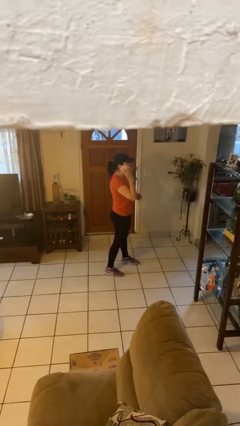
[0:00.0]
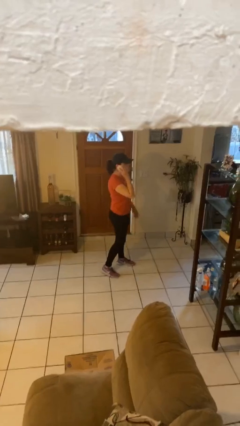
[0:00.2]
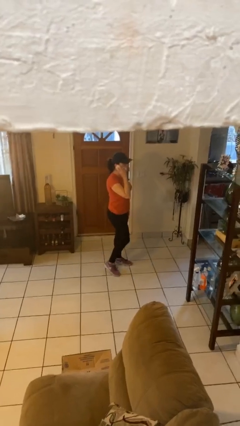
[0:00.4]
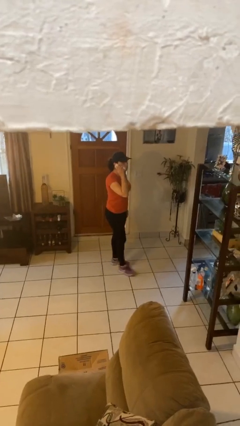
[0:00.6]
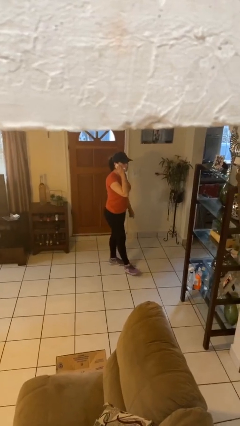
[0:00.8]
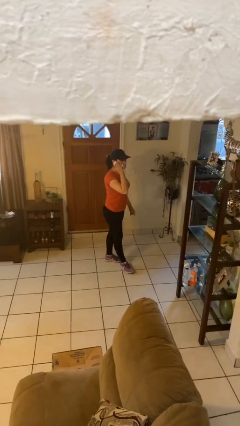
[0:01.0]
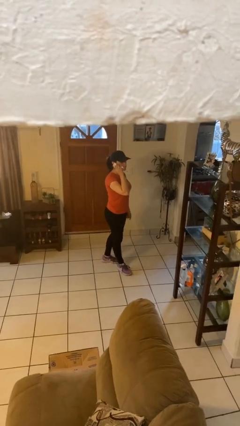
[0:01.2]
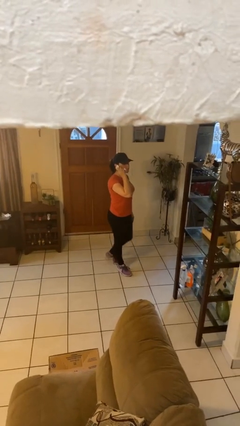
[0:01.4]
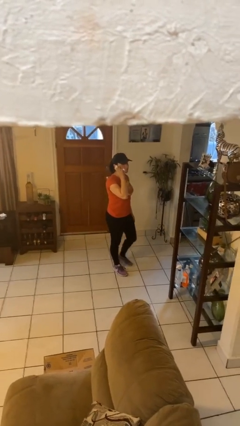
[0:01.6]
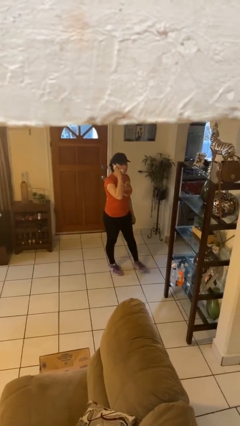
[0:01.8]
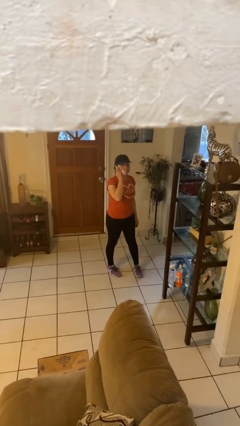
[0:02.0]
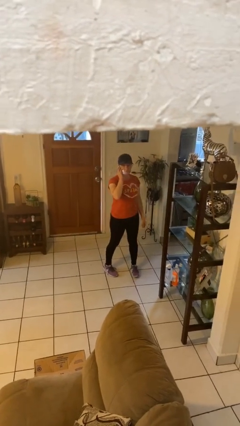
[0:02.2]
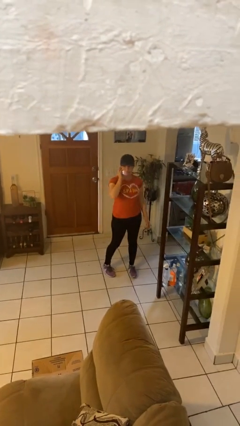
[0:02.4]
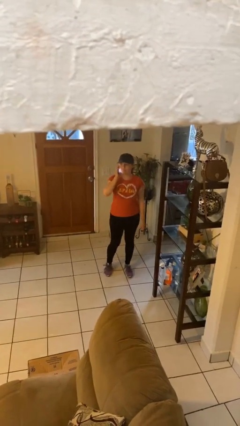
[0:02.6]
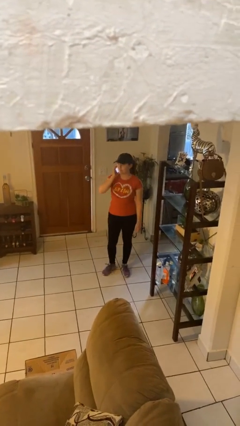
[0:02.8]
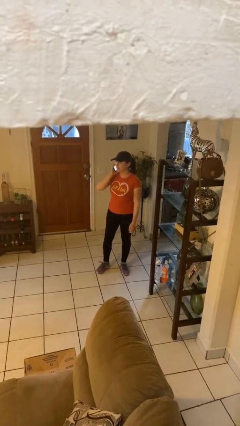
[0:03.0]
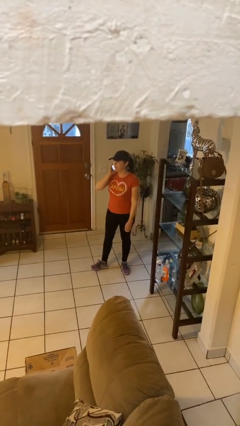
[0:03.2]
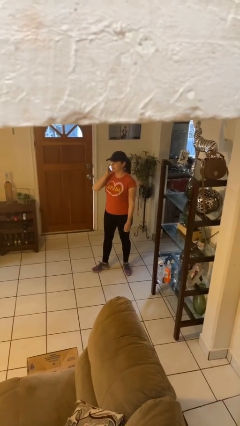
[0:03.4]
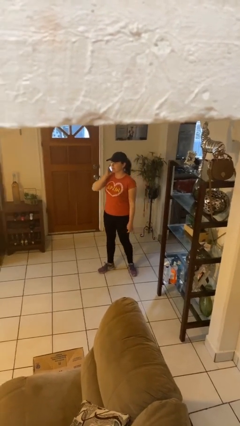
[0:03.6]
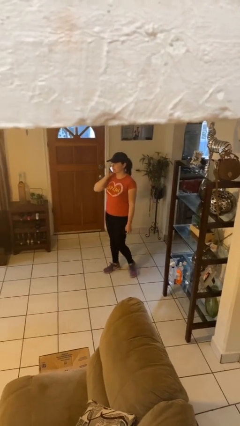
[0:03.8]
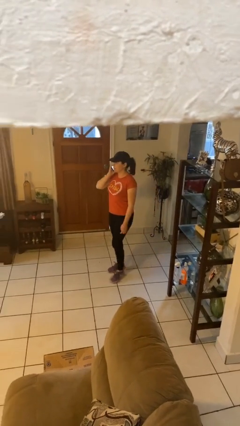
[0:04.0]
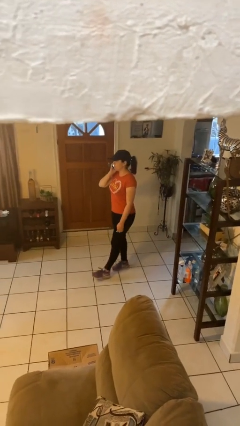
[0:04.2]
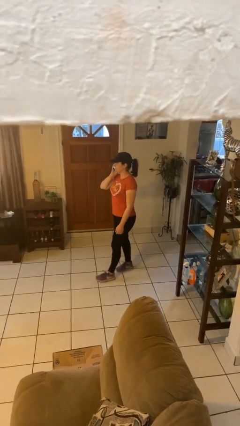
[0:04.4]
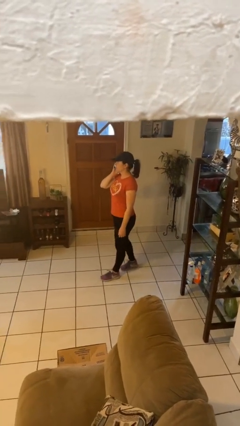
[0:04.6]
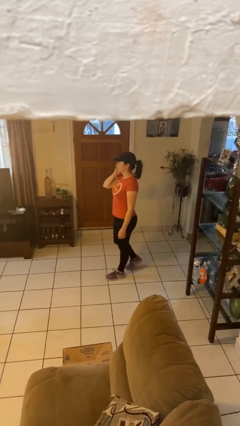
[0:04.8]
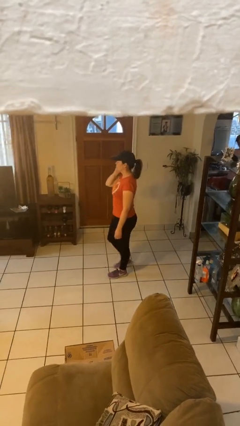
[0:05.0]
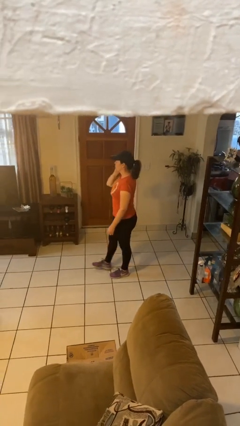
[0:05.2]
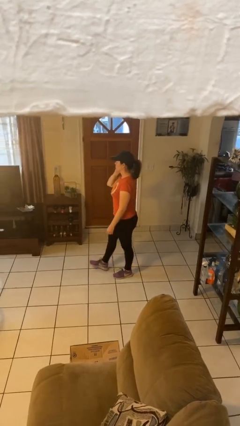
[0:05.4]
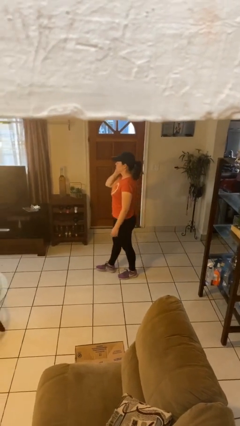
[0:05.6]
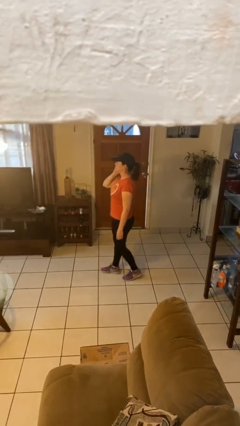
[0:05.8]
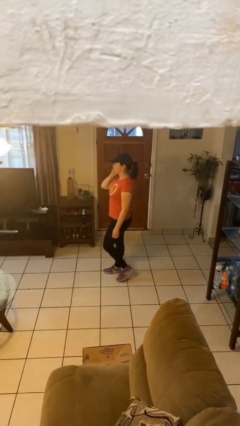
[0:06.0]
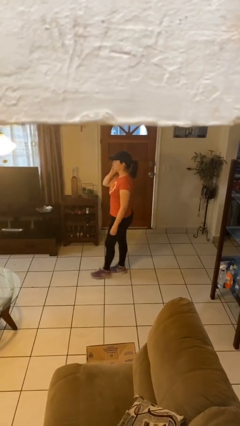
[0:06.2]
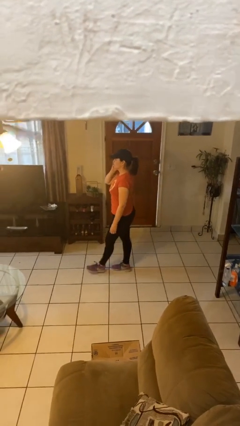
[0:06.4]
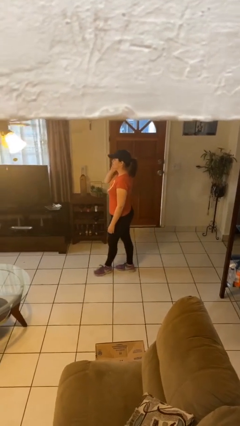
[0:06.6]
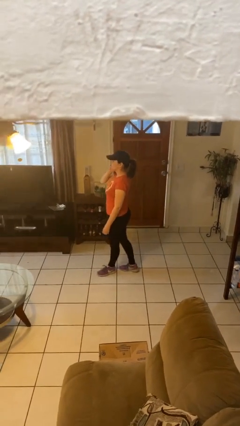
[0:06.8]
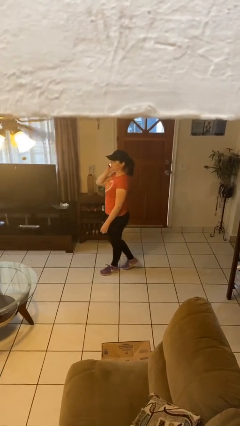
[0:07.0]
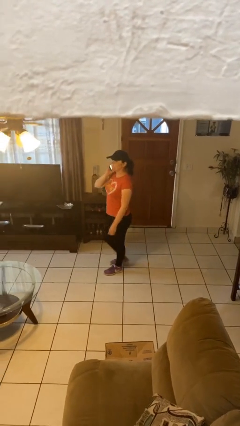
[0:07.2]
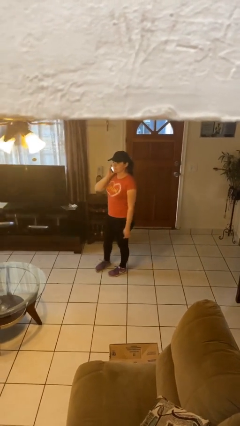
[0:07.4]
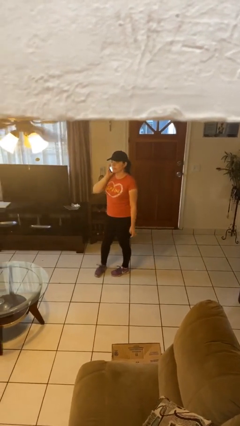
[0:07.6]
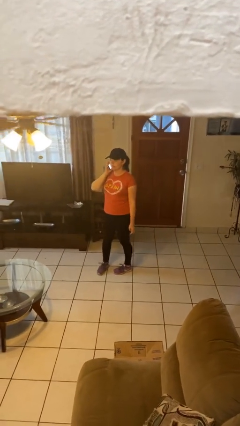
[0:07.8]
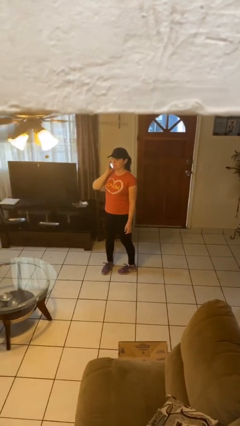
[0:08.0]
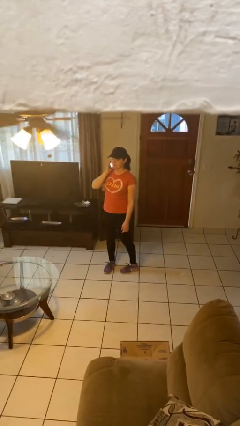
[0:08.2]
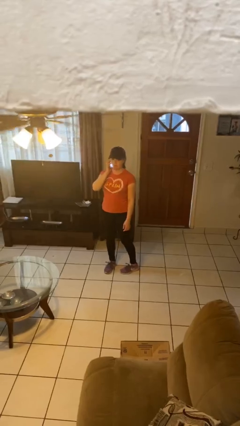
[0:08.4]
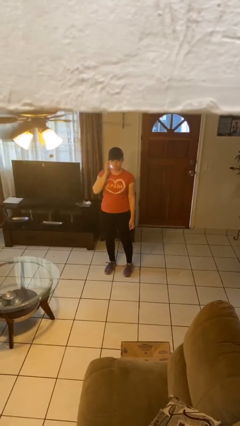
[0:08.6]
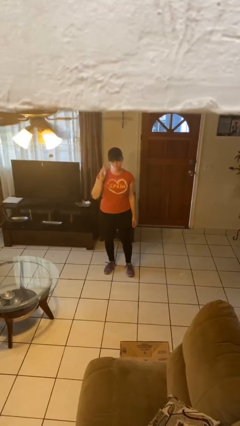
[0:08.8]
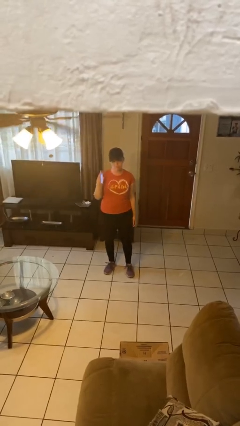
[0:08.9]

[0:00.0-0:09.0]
person talks on phone

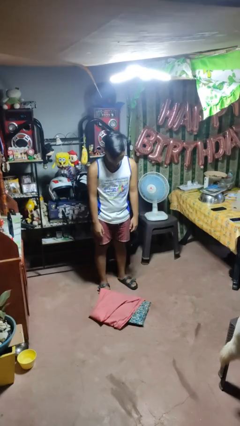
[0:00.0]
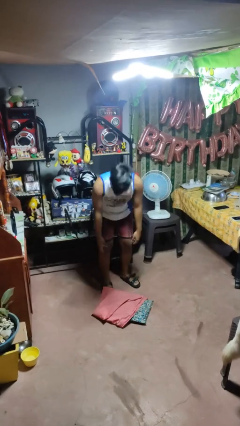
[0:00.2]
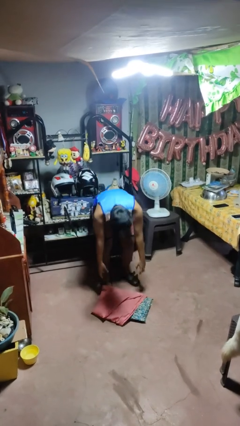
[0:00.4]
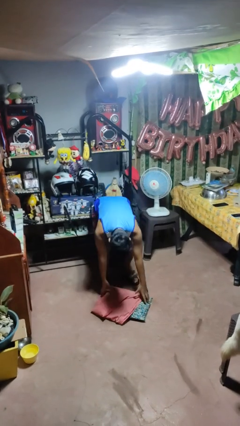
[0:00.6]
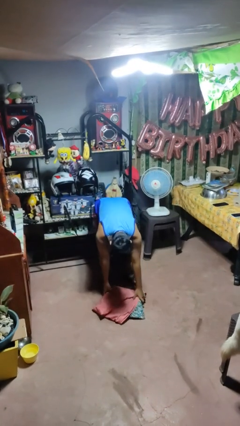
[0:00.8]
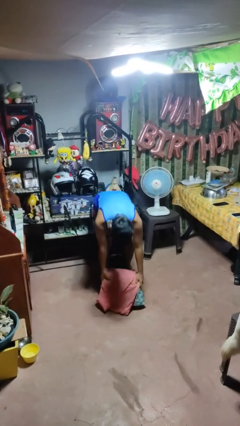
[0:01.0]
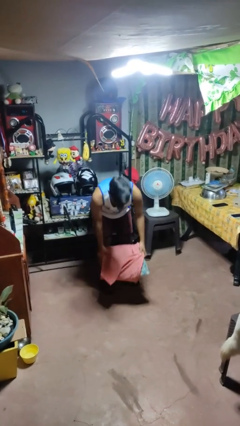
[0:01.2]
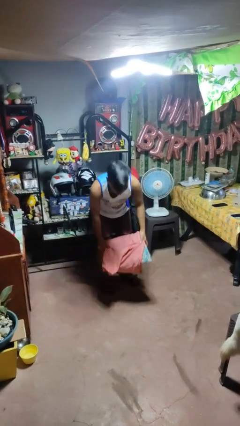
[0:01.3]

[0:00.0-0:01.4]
person picks up object from floor

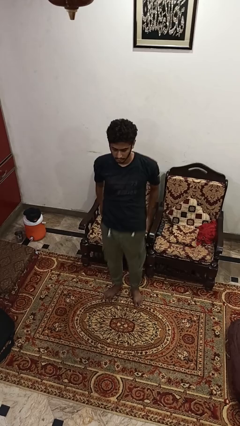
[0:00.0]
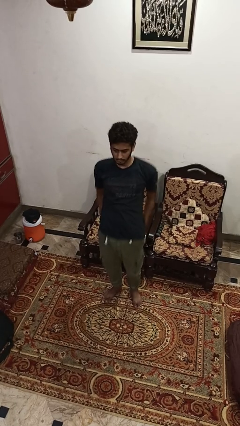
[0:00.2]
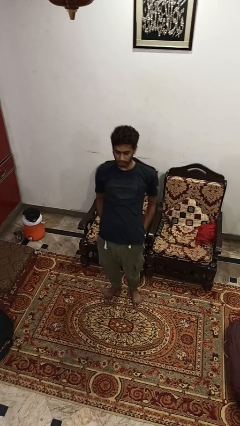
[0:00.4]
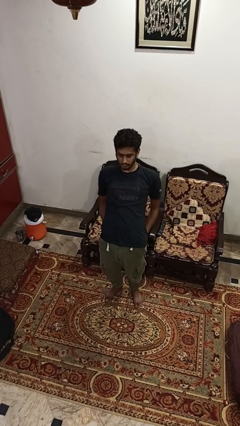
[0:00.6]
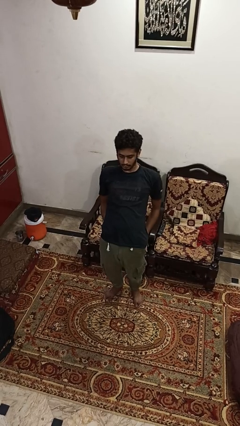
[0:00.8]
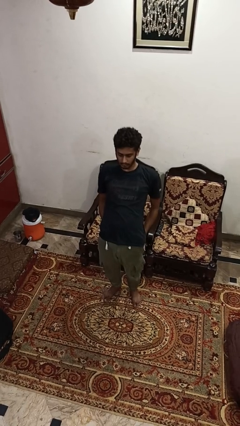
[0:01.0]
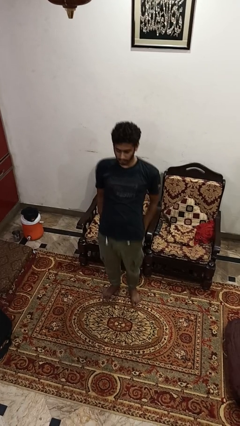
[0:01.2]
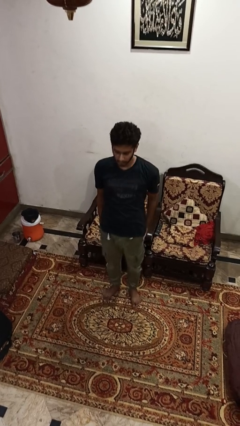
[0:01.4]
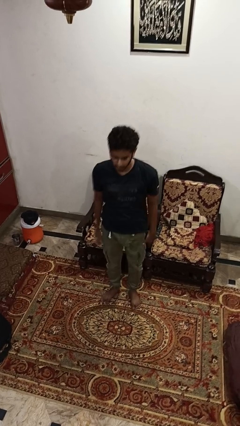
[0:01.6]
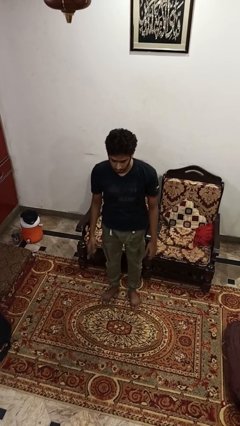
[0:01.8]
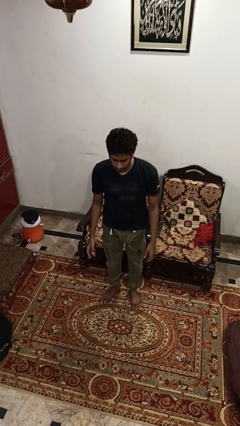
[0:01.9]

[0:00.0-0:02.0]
person stretches back

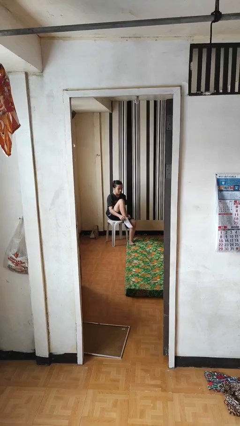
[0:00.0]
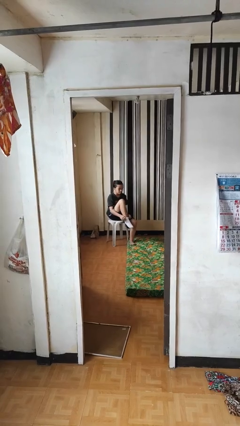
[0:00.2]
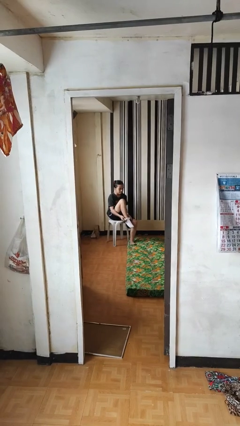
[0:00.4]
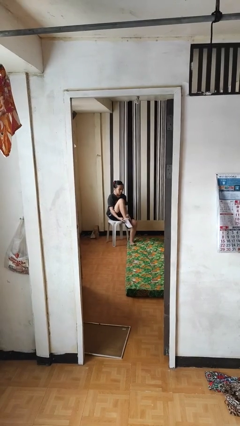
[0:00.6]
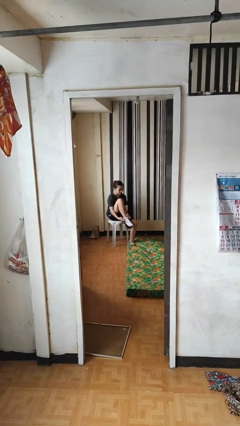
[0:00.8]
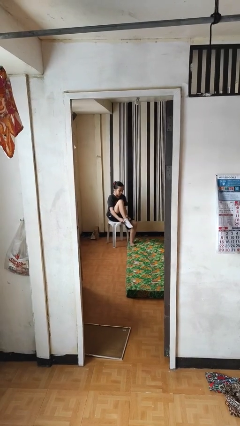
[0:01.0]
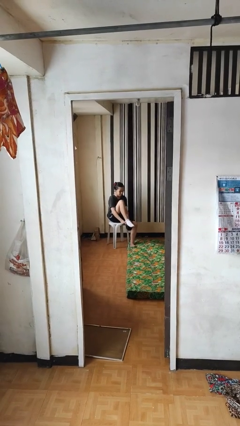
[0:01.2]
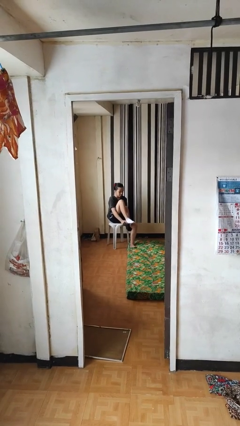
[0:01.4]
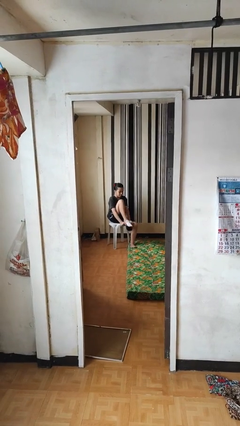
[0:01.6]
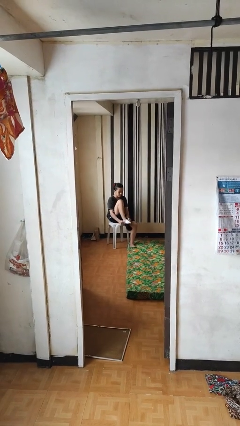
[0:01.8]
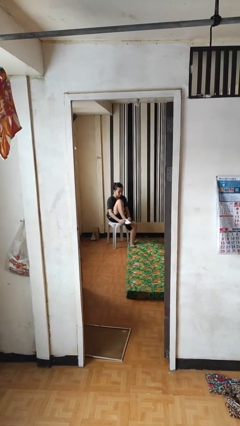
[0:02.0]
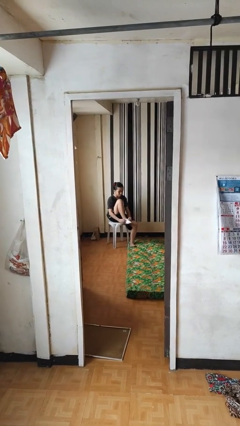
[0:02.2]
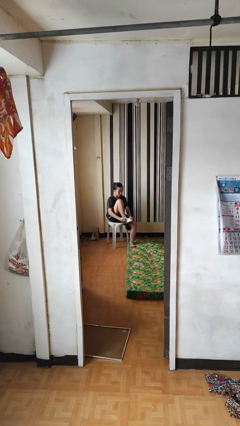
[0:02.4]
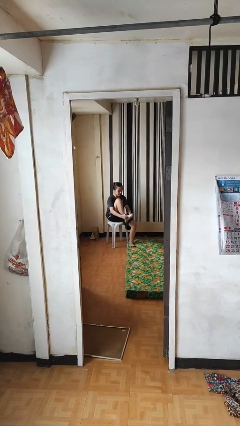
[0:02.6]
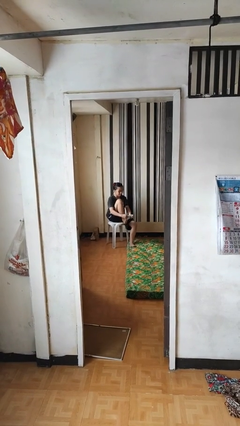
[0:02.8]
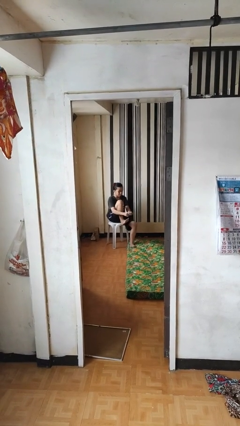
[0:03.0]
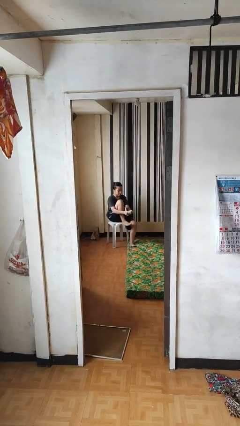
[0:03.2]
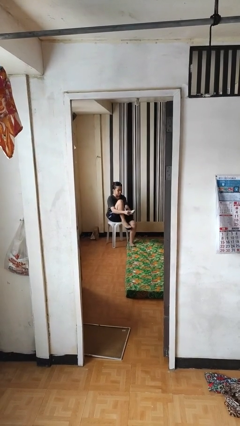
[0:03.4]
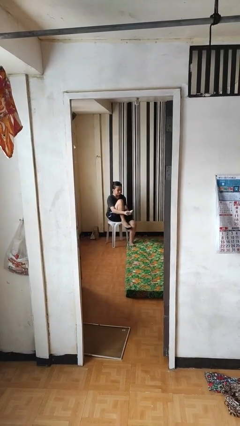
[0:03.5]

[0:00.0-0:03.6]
person takes off socks

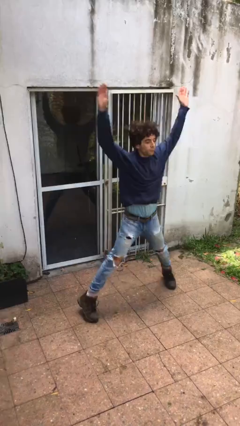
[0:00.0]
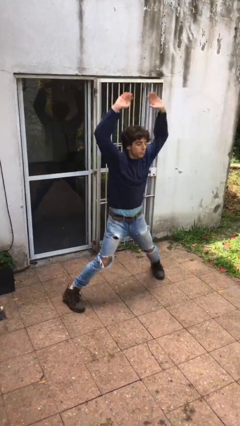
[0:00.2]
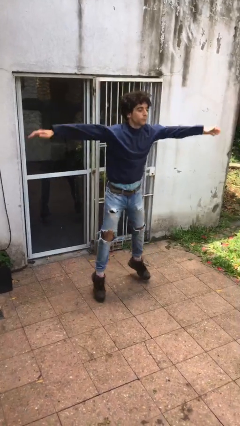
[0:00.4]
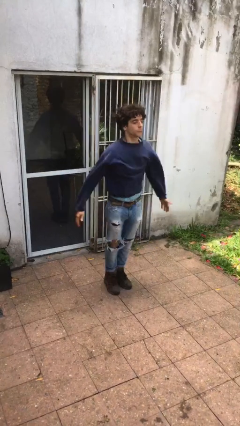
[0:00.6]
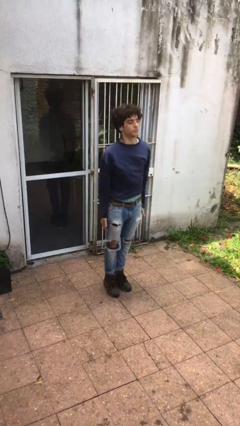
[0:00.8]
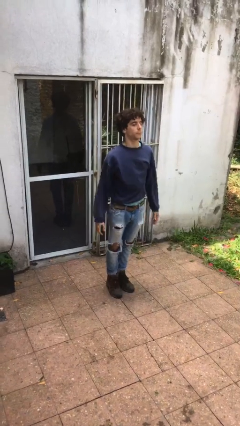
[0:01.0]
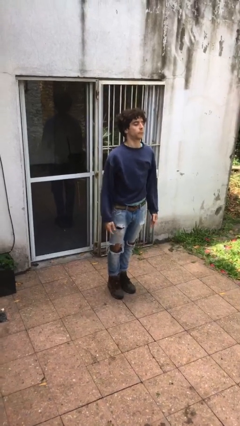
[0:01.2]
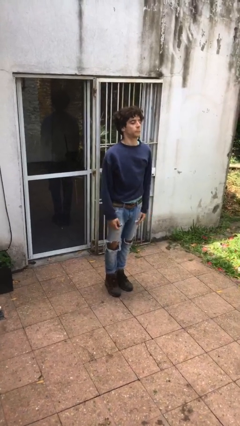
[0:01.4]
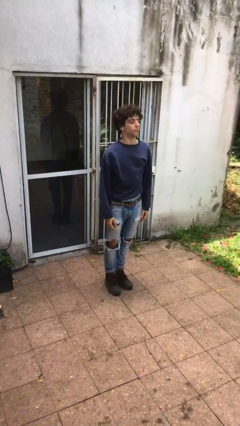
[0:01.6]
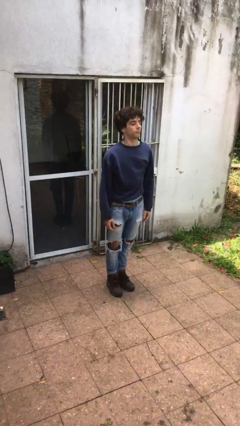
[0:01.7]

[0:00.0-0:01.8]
person exercises with jumping jacks

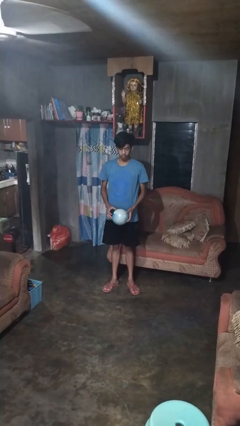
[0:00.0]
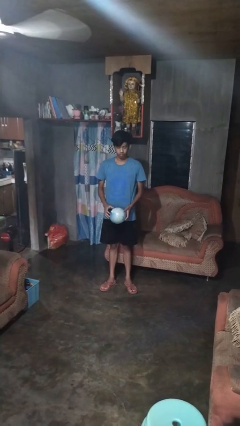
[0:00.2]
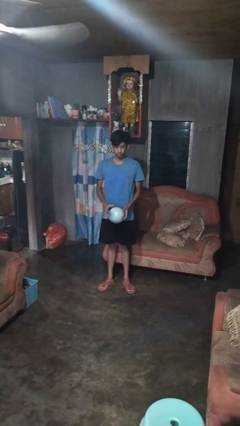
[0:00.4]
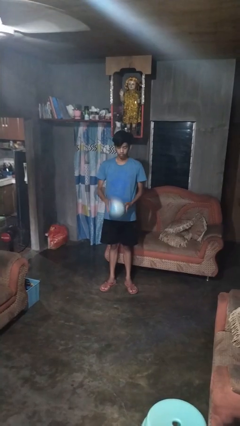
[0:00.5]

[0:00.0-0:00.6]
person bounces ball on floor
